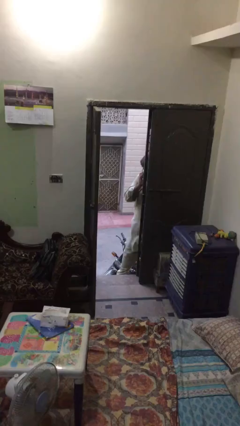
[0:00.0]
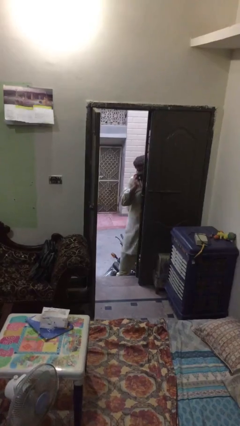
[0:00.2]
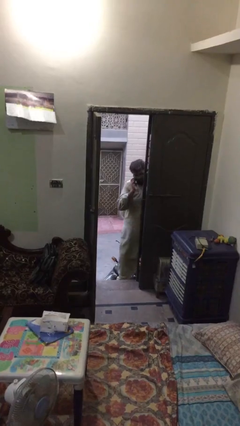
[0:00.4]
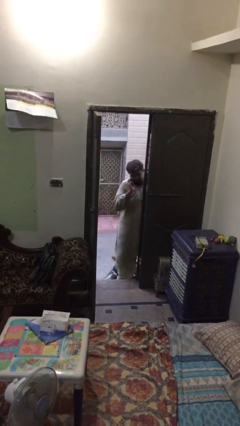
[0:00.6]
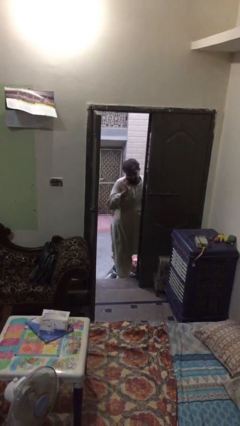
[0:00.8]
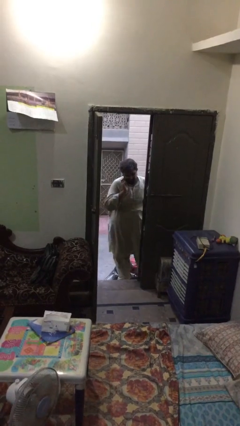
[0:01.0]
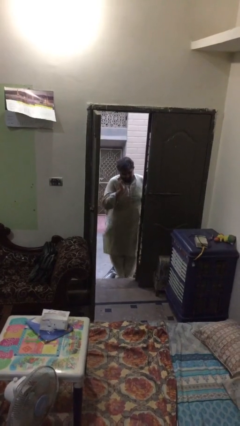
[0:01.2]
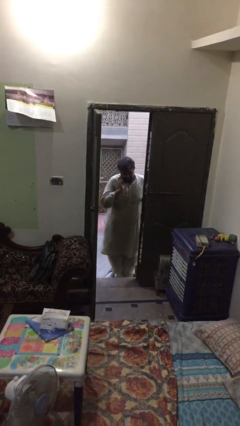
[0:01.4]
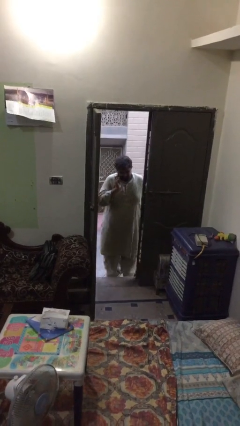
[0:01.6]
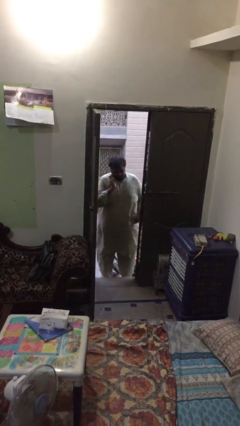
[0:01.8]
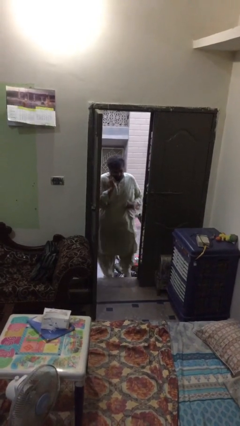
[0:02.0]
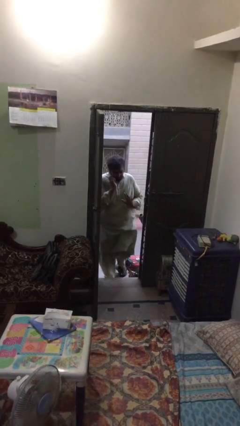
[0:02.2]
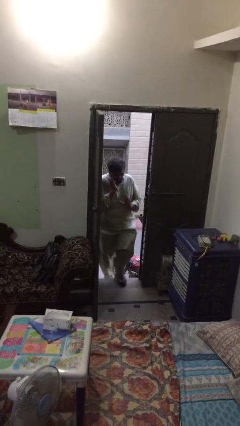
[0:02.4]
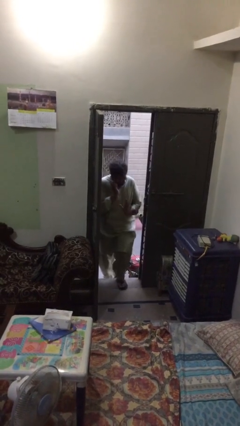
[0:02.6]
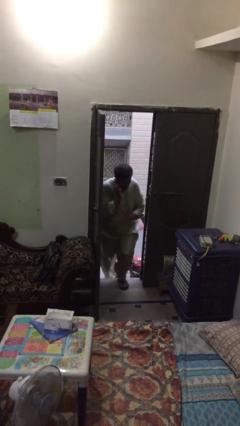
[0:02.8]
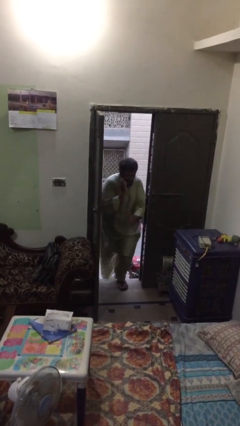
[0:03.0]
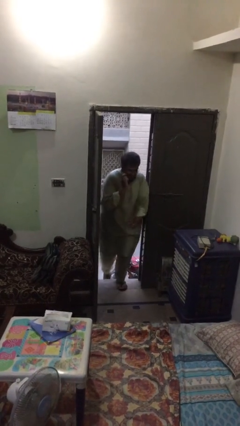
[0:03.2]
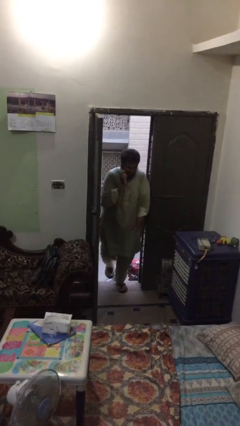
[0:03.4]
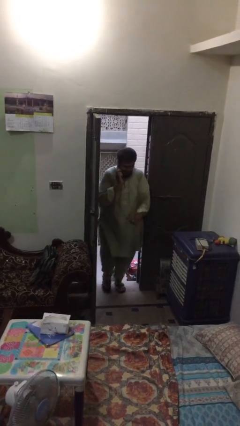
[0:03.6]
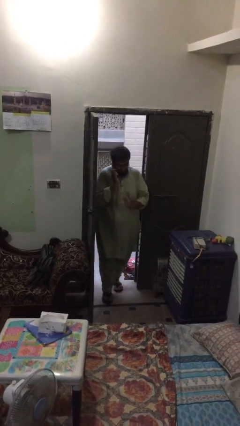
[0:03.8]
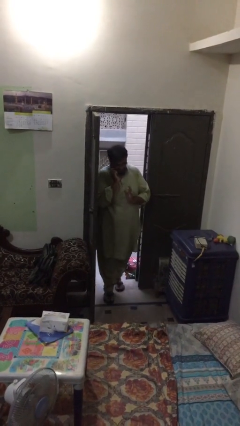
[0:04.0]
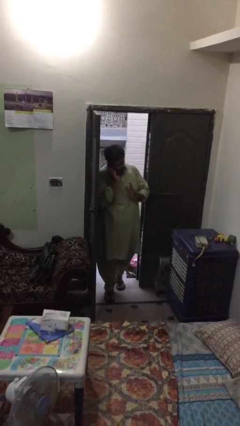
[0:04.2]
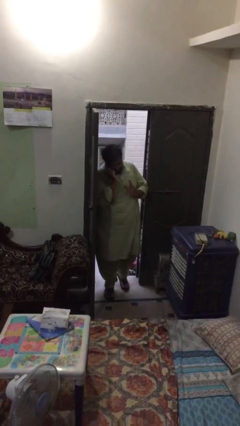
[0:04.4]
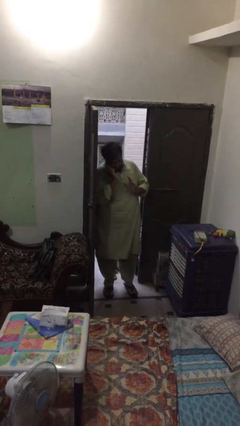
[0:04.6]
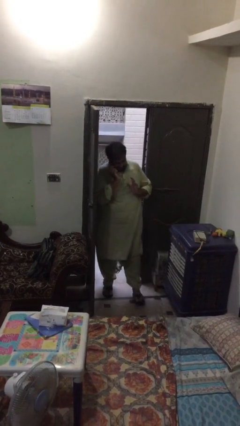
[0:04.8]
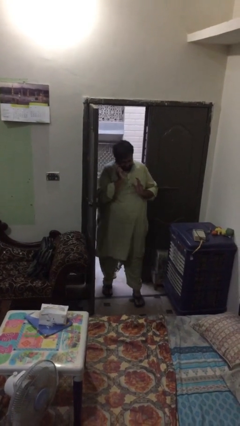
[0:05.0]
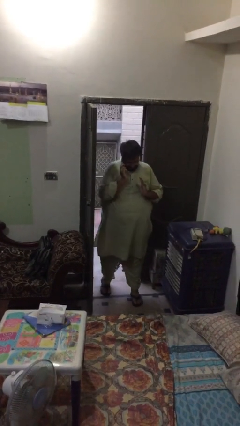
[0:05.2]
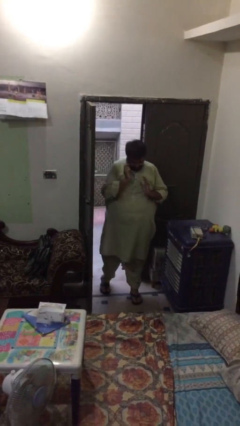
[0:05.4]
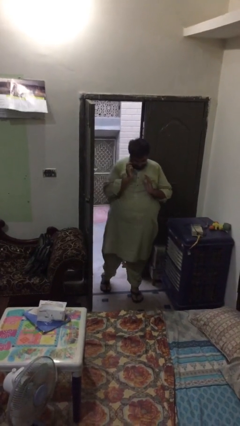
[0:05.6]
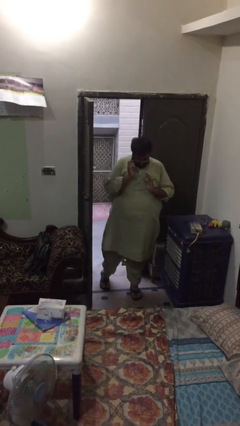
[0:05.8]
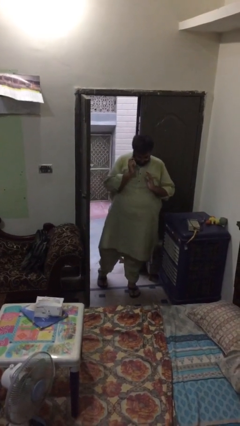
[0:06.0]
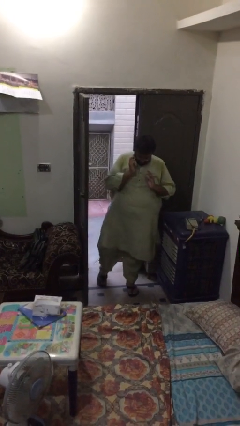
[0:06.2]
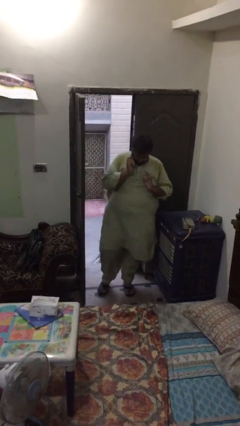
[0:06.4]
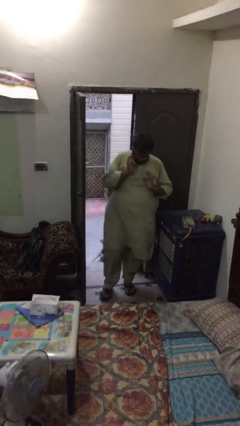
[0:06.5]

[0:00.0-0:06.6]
person enters scene through structure

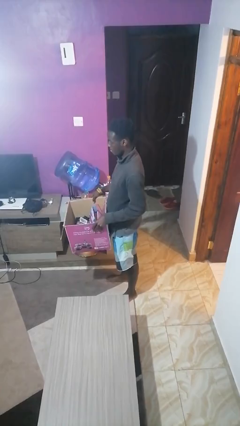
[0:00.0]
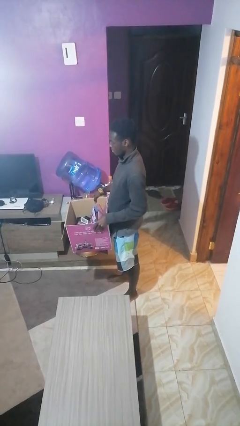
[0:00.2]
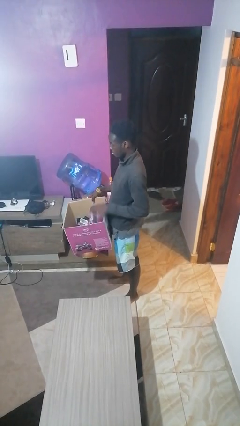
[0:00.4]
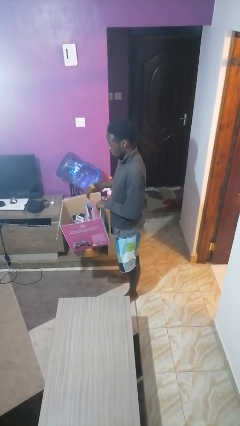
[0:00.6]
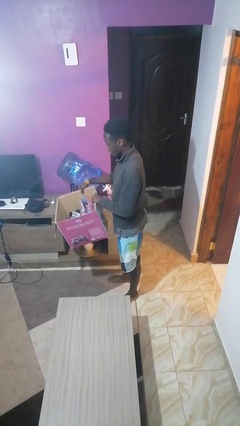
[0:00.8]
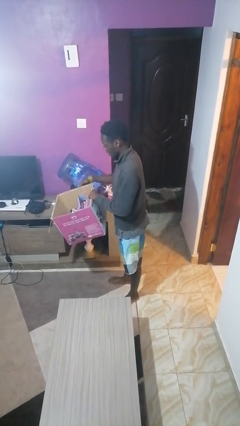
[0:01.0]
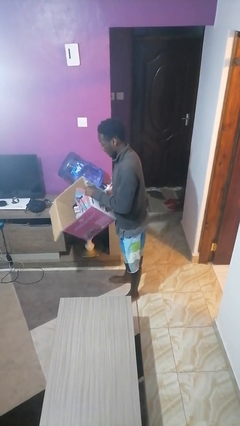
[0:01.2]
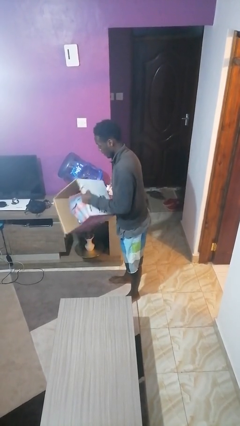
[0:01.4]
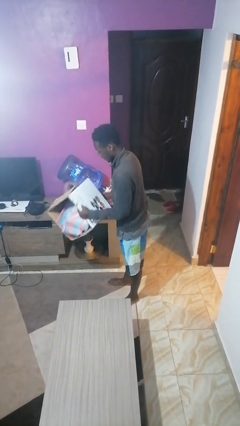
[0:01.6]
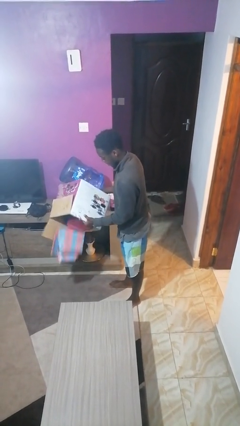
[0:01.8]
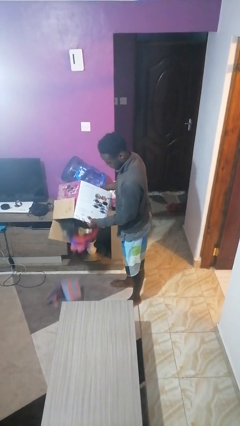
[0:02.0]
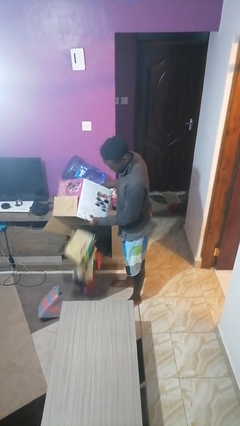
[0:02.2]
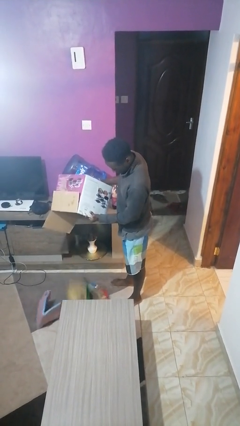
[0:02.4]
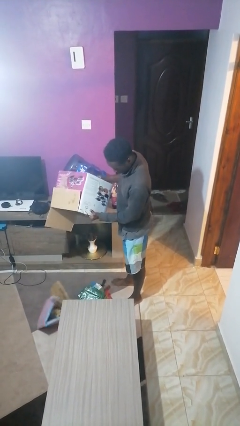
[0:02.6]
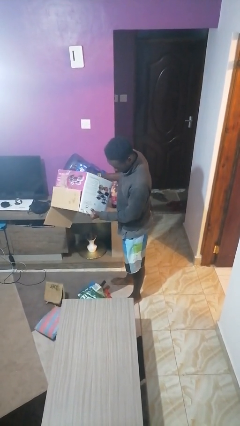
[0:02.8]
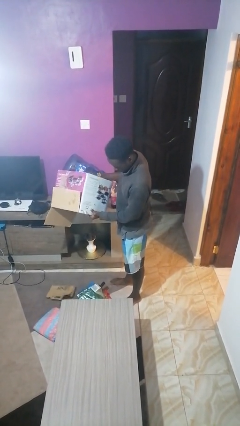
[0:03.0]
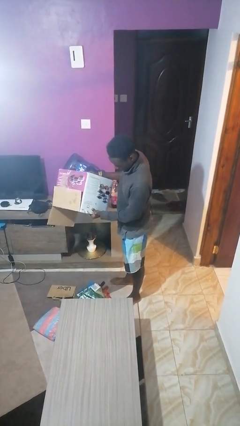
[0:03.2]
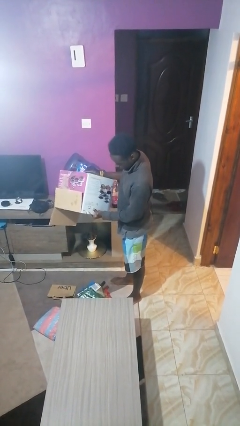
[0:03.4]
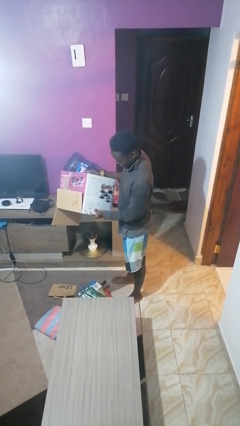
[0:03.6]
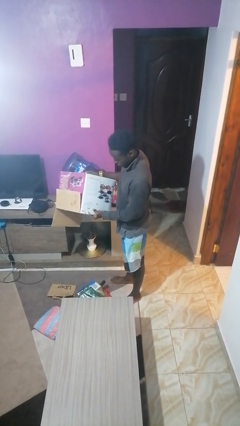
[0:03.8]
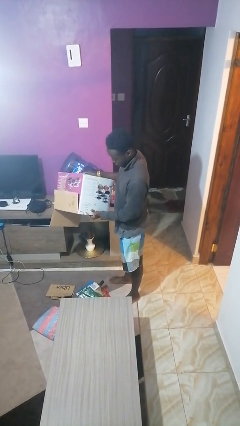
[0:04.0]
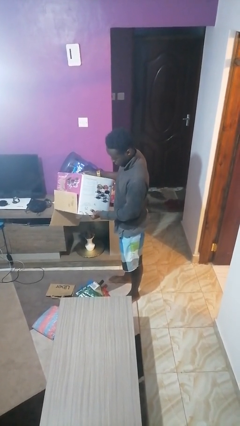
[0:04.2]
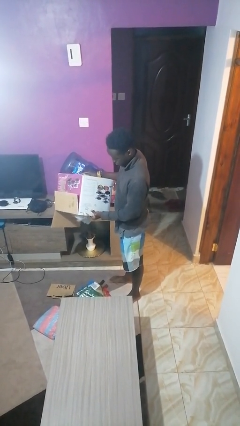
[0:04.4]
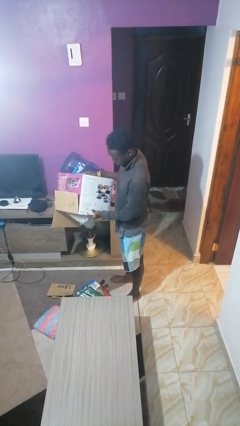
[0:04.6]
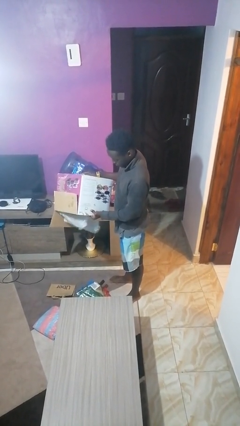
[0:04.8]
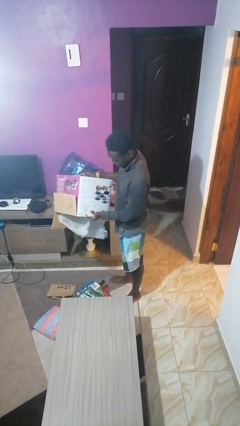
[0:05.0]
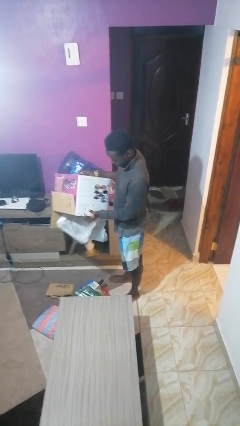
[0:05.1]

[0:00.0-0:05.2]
person unloads box onto floor

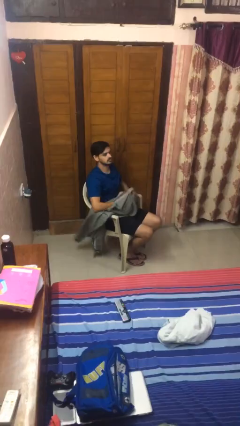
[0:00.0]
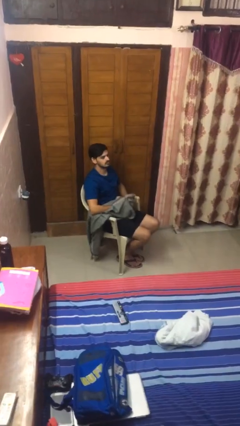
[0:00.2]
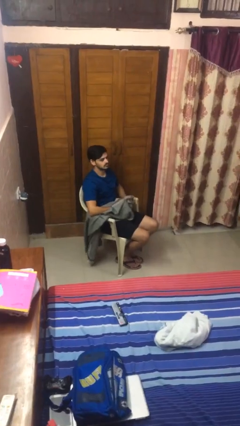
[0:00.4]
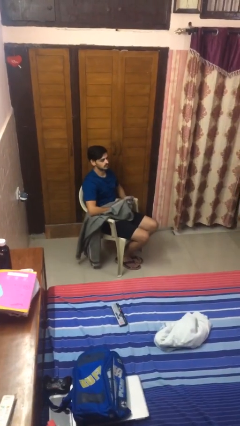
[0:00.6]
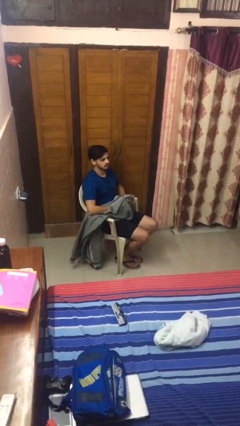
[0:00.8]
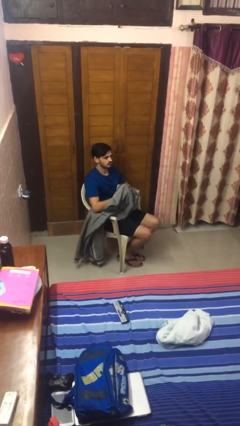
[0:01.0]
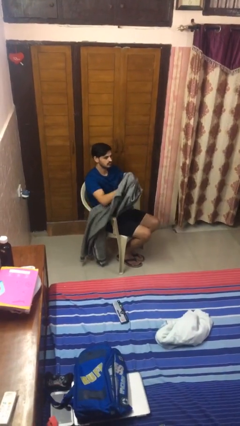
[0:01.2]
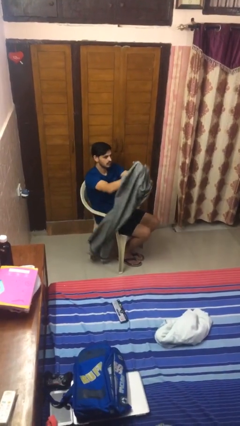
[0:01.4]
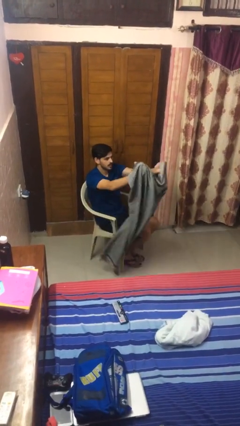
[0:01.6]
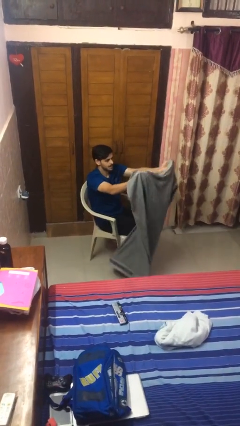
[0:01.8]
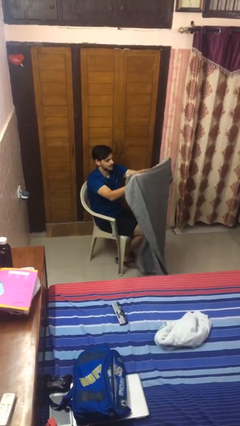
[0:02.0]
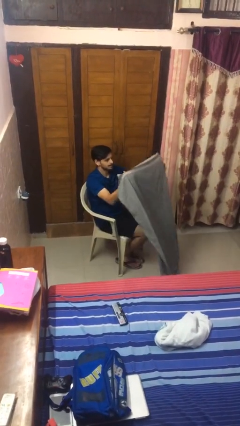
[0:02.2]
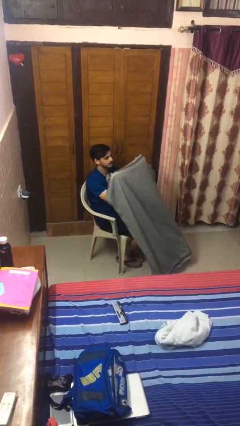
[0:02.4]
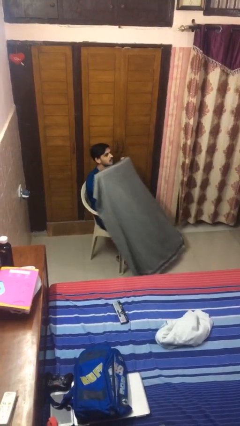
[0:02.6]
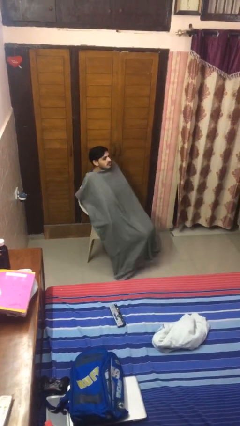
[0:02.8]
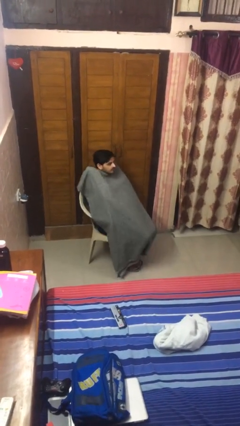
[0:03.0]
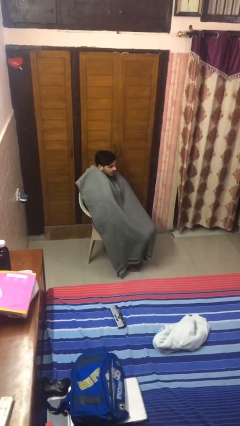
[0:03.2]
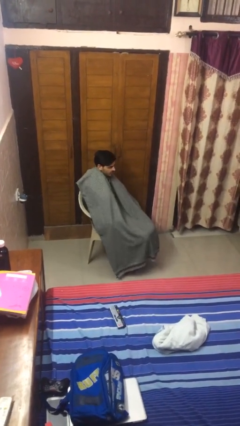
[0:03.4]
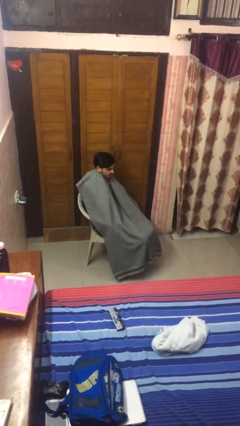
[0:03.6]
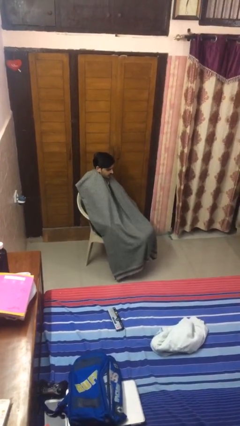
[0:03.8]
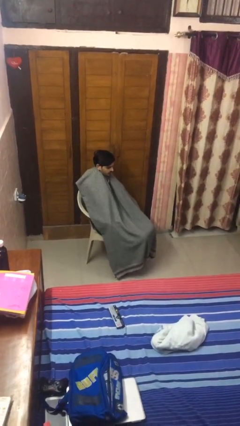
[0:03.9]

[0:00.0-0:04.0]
person covers with blanket

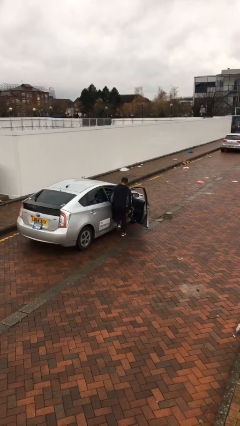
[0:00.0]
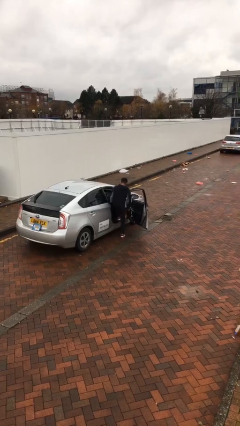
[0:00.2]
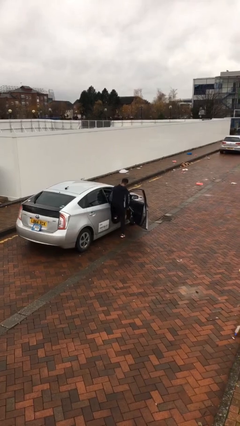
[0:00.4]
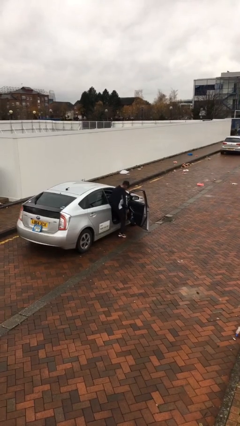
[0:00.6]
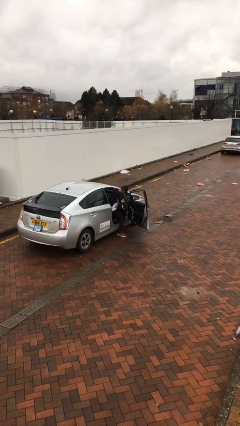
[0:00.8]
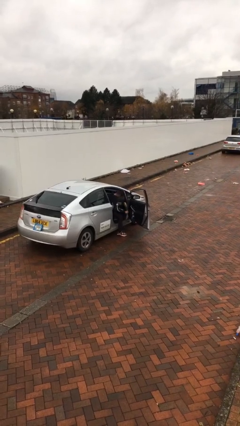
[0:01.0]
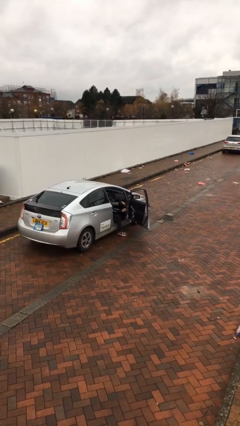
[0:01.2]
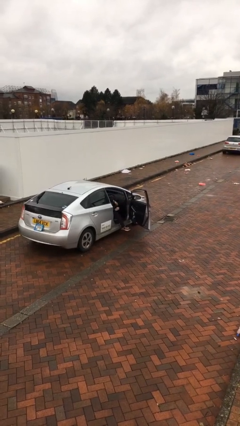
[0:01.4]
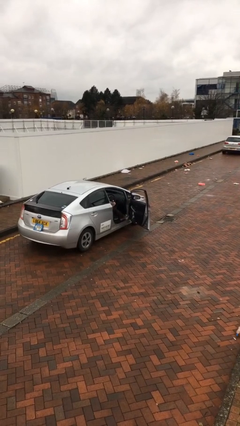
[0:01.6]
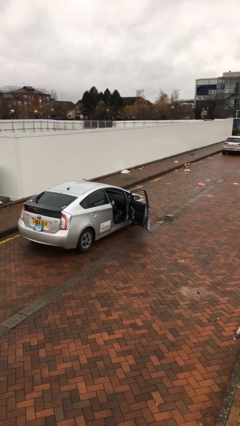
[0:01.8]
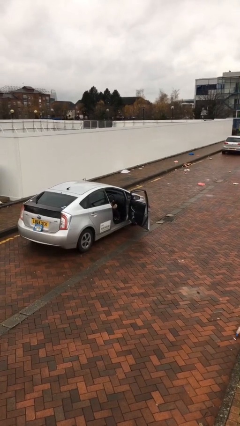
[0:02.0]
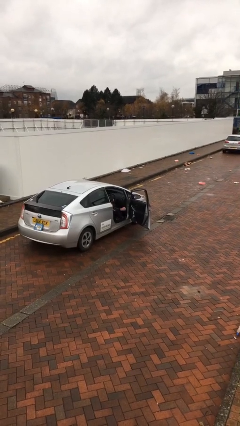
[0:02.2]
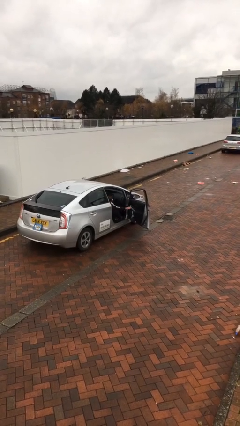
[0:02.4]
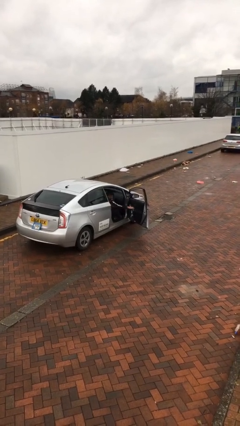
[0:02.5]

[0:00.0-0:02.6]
person enters car
